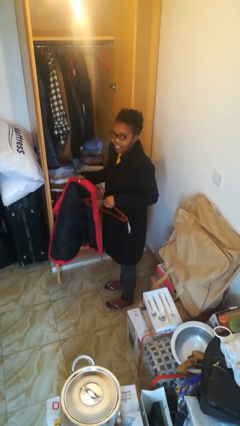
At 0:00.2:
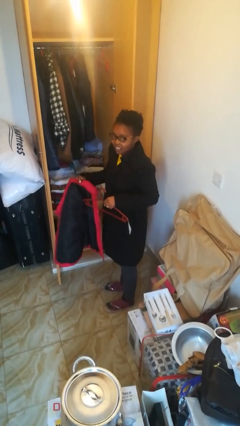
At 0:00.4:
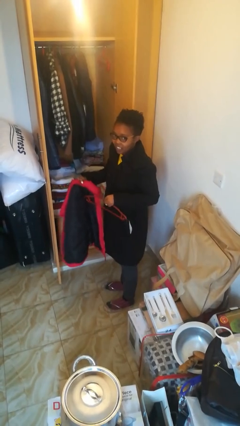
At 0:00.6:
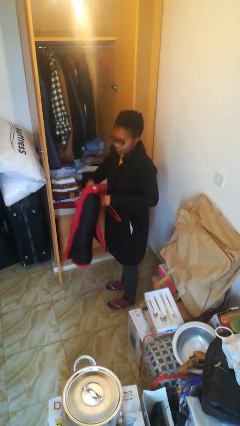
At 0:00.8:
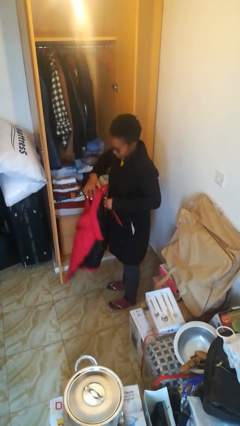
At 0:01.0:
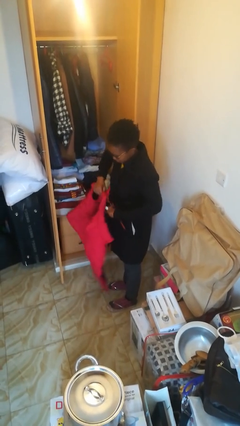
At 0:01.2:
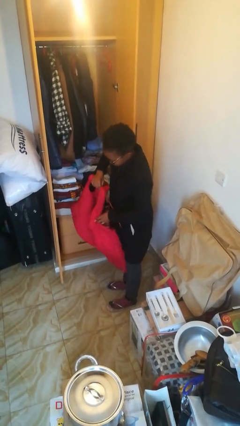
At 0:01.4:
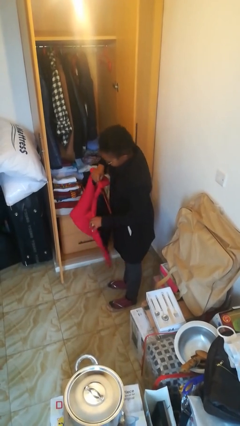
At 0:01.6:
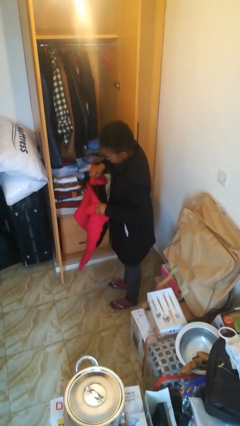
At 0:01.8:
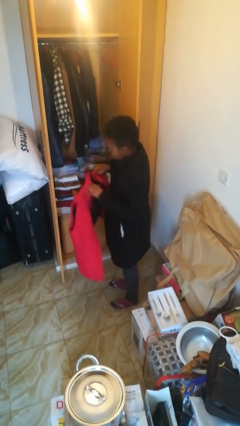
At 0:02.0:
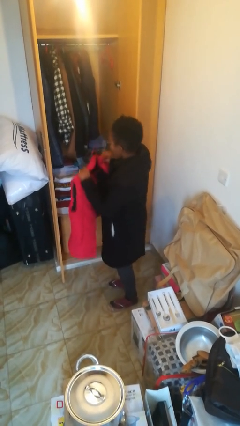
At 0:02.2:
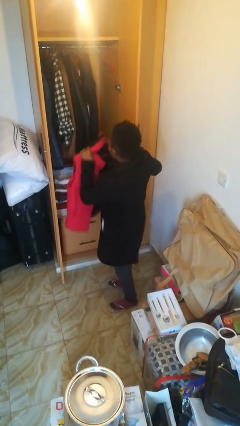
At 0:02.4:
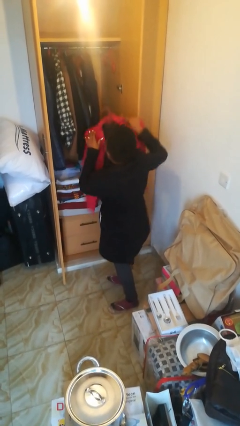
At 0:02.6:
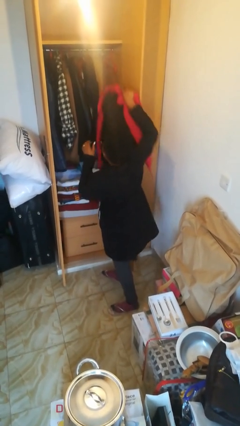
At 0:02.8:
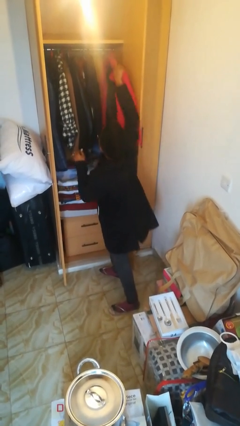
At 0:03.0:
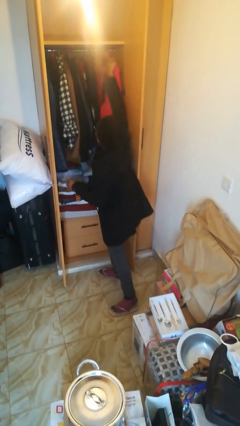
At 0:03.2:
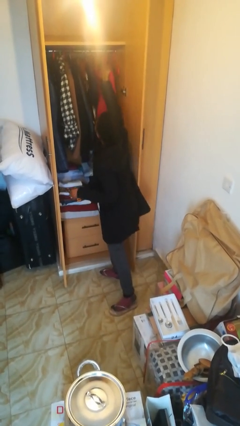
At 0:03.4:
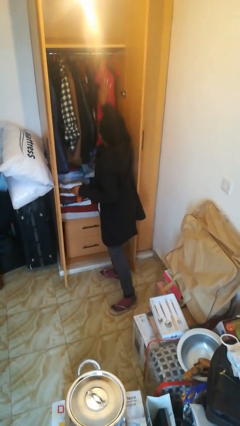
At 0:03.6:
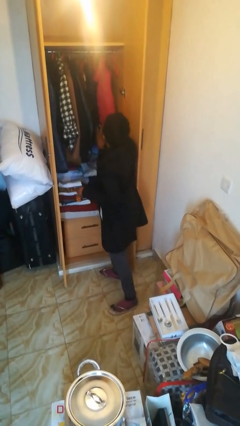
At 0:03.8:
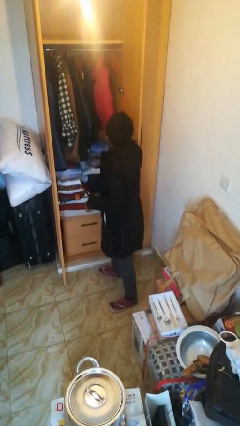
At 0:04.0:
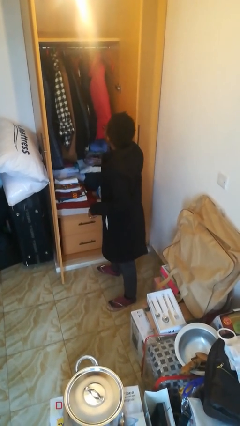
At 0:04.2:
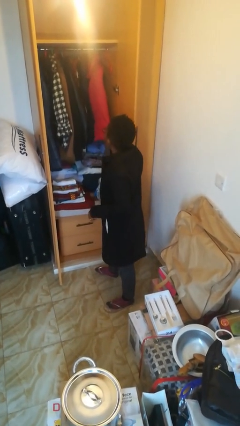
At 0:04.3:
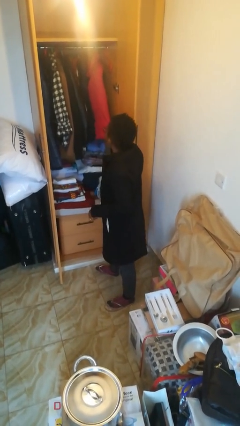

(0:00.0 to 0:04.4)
person puts clothes into closet

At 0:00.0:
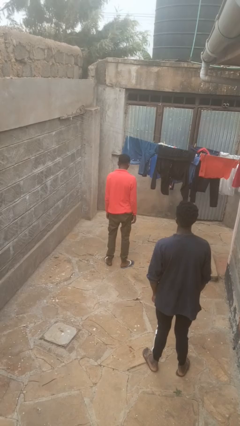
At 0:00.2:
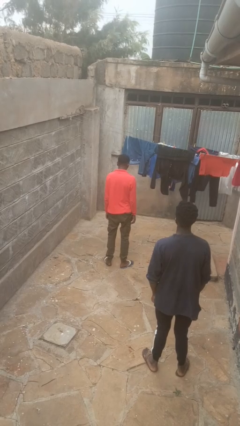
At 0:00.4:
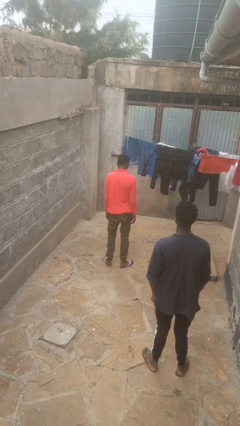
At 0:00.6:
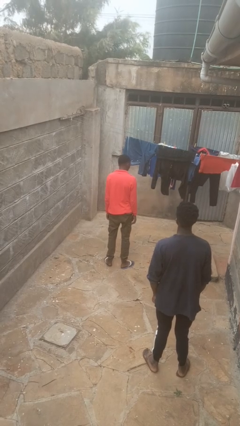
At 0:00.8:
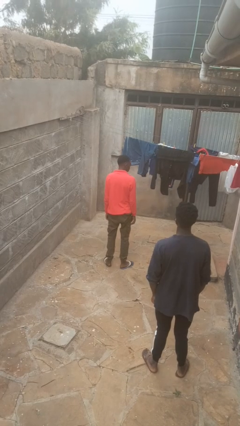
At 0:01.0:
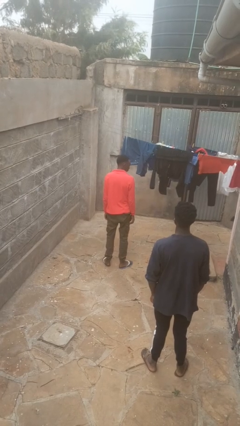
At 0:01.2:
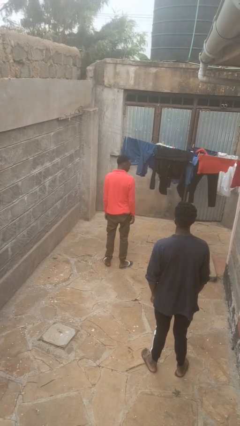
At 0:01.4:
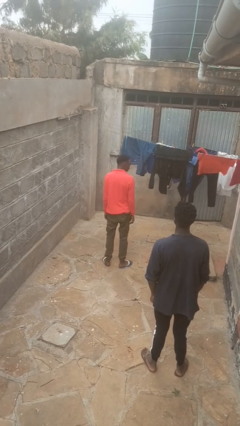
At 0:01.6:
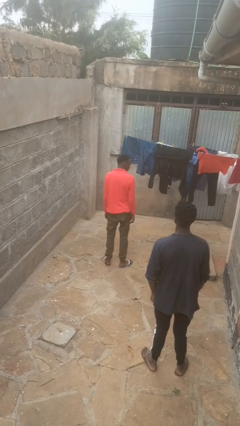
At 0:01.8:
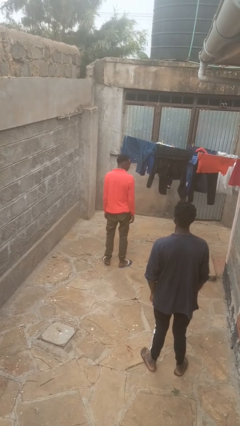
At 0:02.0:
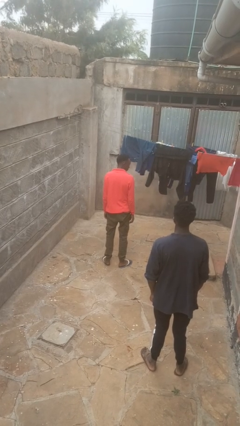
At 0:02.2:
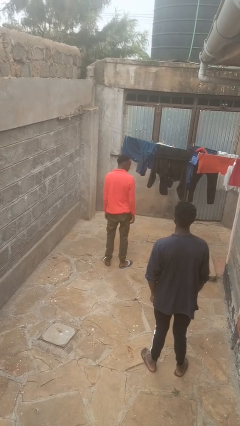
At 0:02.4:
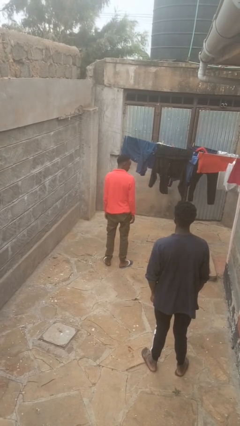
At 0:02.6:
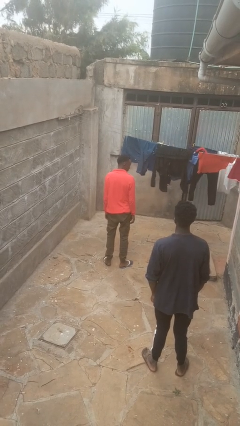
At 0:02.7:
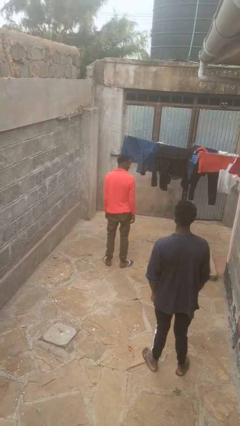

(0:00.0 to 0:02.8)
person looks over shoulder

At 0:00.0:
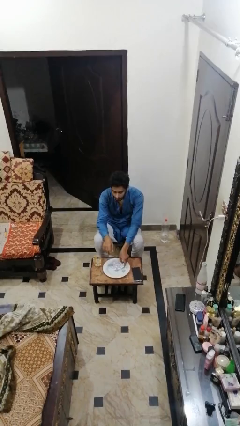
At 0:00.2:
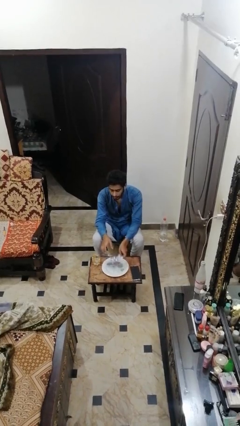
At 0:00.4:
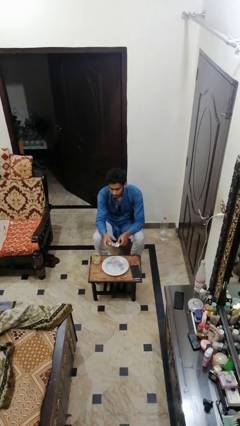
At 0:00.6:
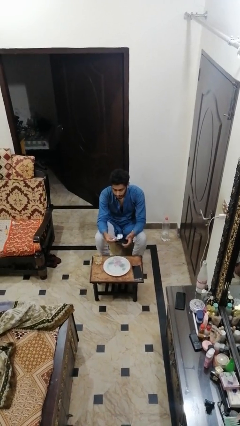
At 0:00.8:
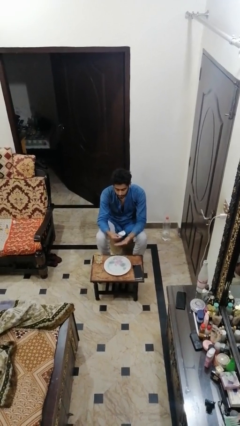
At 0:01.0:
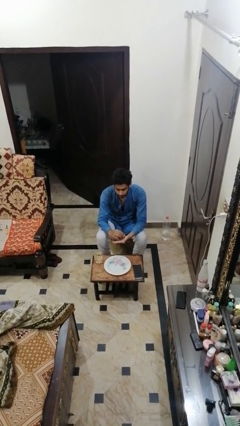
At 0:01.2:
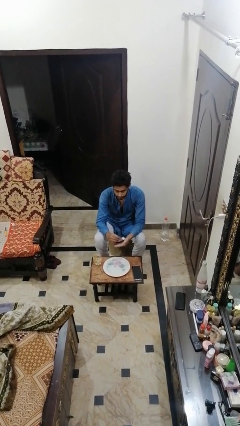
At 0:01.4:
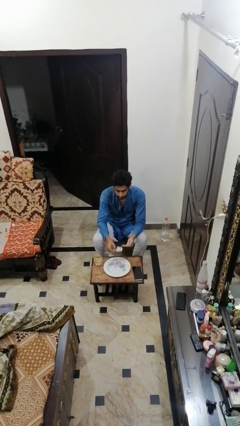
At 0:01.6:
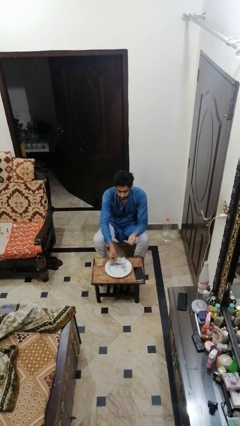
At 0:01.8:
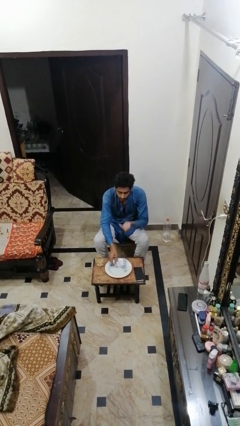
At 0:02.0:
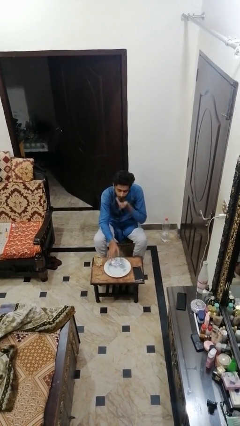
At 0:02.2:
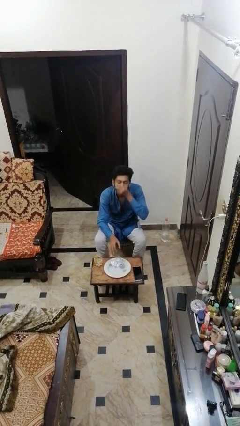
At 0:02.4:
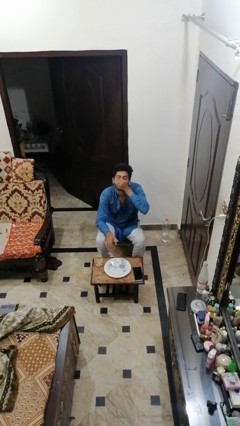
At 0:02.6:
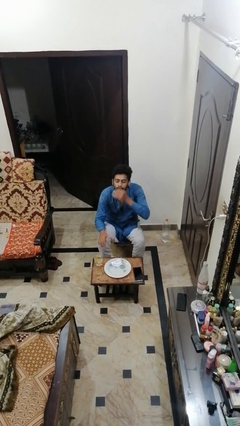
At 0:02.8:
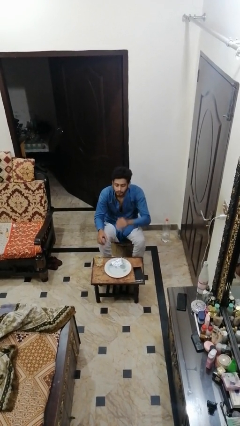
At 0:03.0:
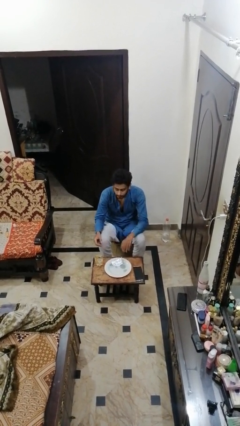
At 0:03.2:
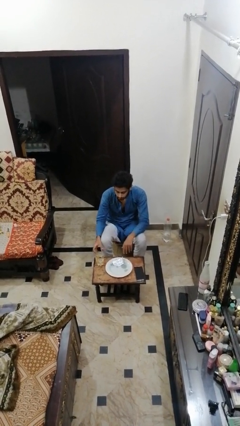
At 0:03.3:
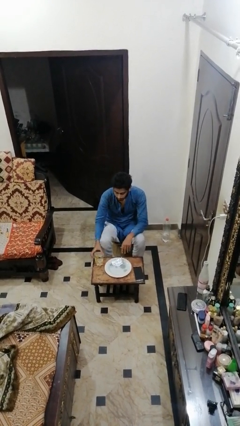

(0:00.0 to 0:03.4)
person takes medicine pills

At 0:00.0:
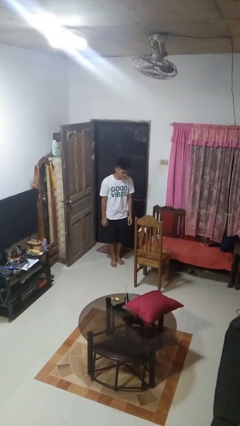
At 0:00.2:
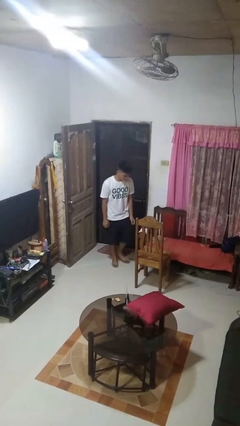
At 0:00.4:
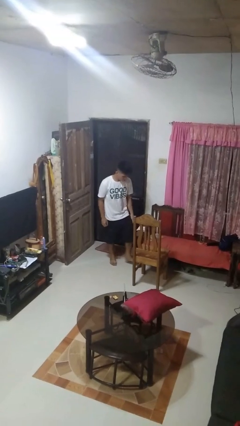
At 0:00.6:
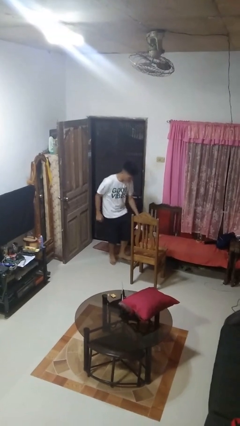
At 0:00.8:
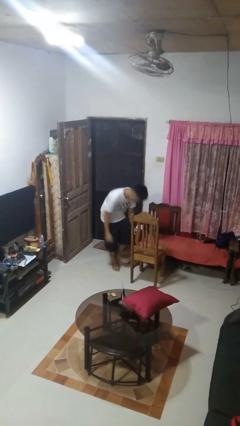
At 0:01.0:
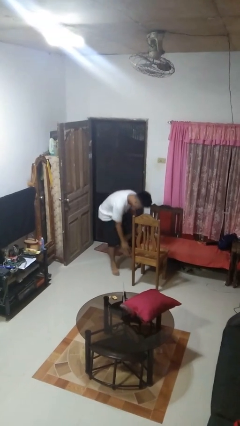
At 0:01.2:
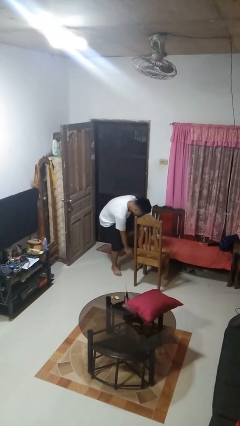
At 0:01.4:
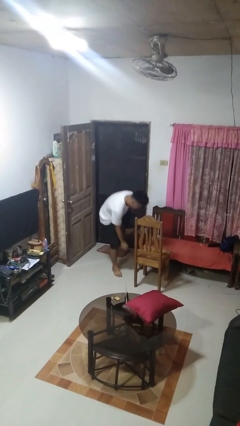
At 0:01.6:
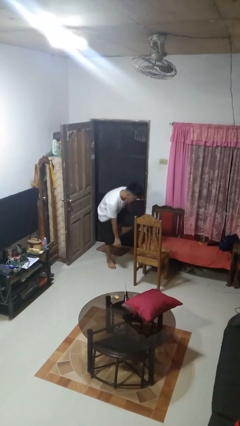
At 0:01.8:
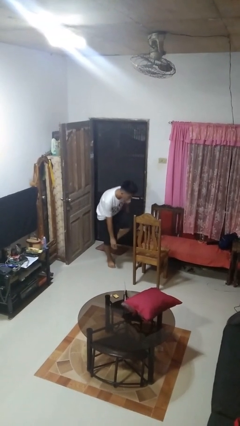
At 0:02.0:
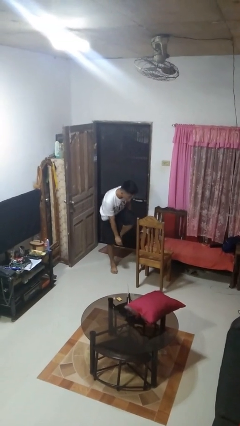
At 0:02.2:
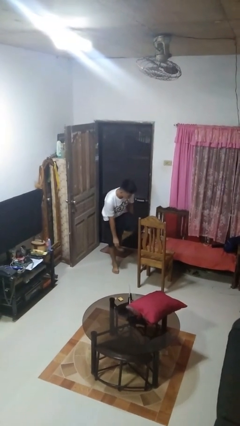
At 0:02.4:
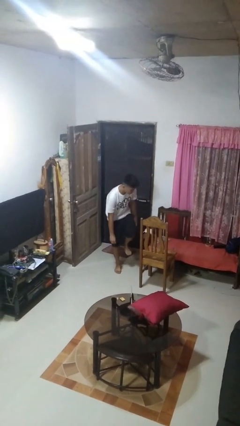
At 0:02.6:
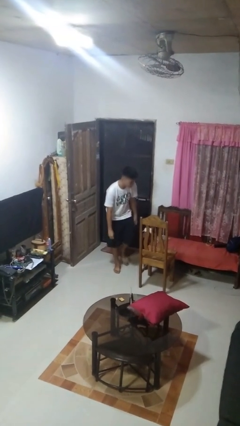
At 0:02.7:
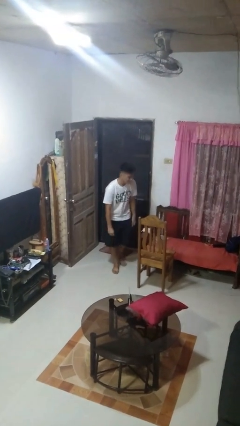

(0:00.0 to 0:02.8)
person stubs toe

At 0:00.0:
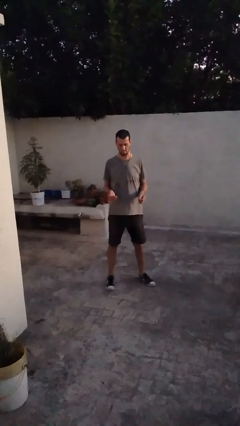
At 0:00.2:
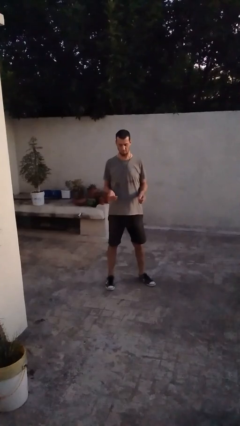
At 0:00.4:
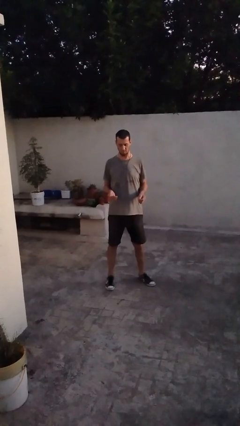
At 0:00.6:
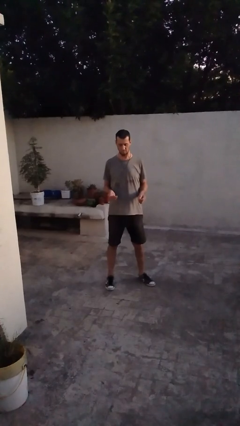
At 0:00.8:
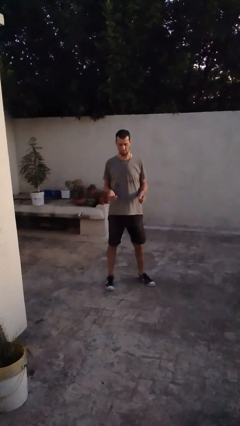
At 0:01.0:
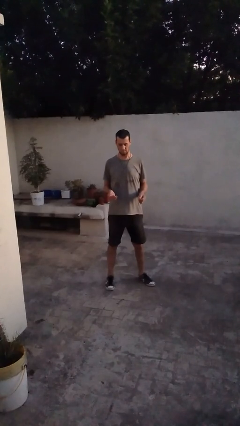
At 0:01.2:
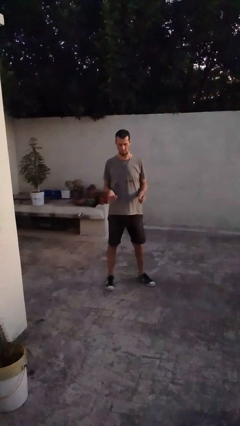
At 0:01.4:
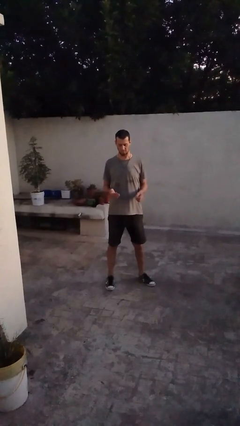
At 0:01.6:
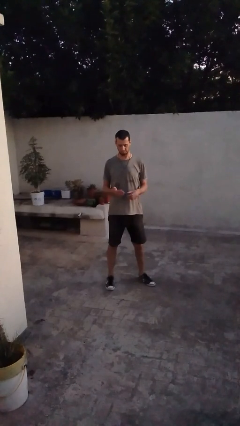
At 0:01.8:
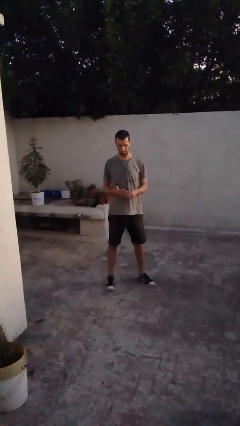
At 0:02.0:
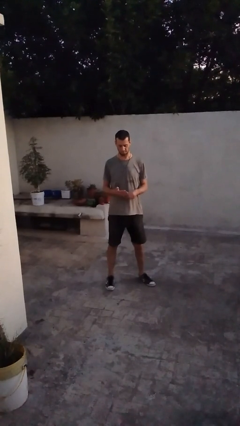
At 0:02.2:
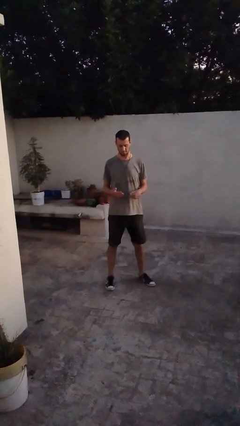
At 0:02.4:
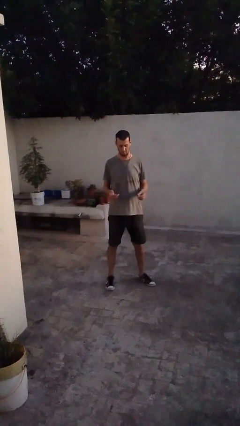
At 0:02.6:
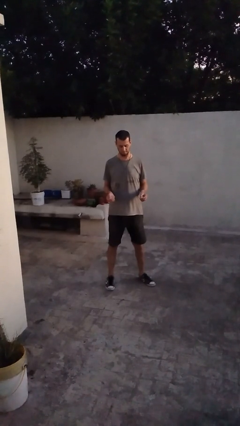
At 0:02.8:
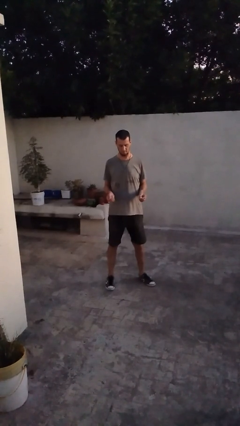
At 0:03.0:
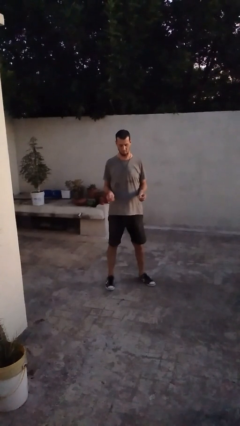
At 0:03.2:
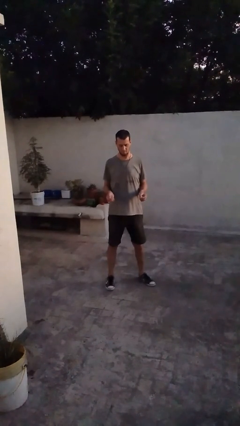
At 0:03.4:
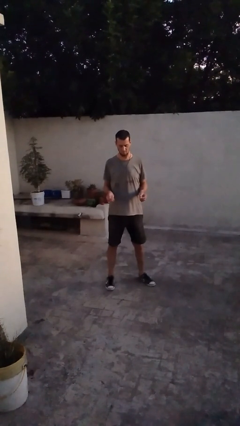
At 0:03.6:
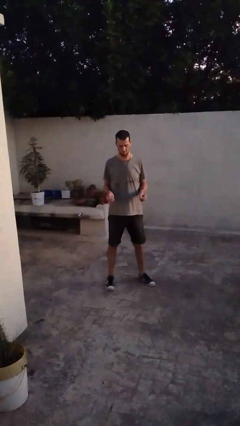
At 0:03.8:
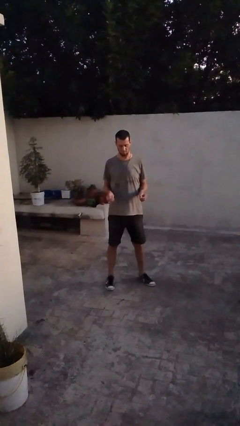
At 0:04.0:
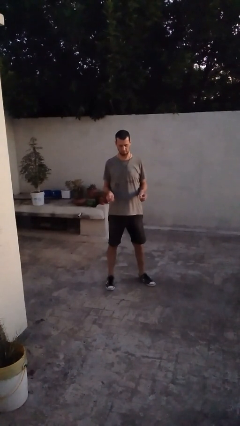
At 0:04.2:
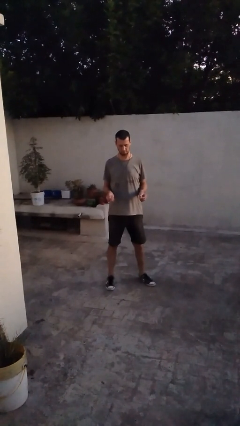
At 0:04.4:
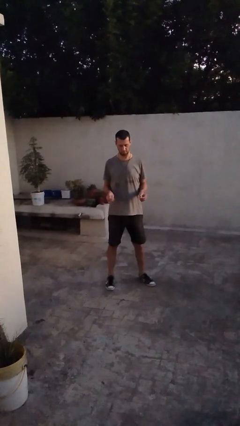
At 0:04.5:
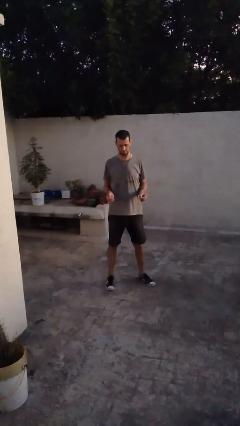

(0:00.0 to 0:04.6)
person takes off ring
